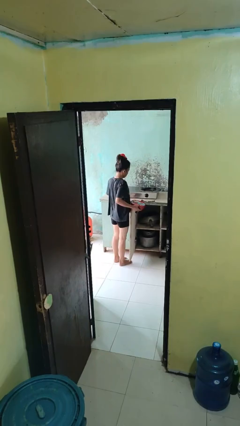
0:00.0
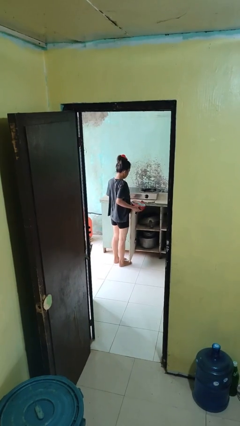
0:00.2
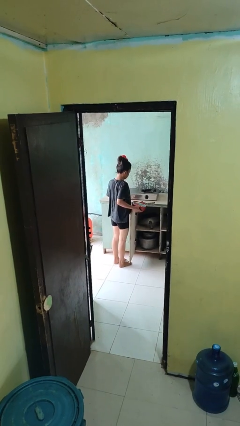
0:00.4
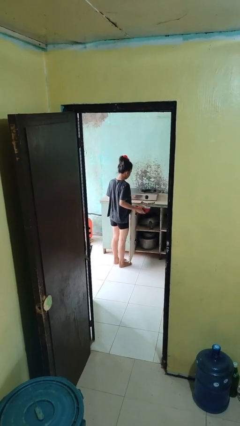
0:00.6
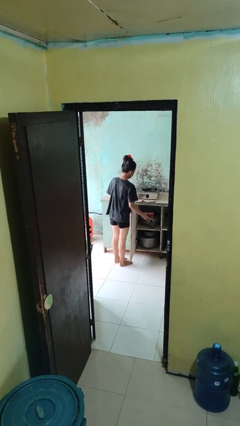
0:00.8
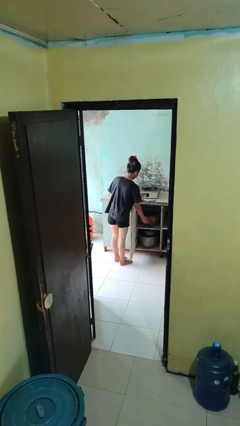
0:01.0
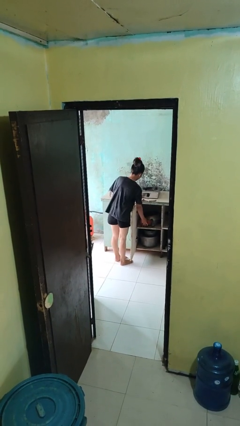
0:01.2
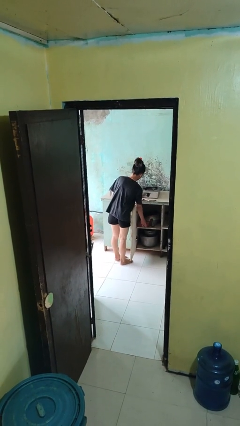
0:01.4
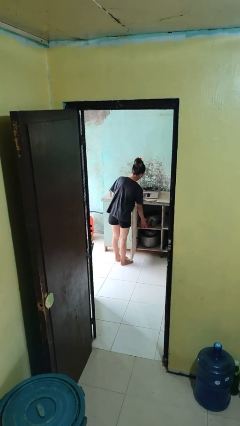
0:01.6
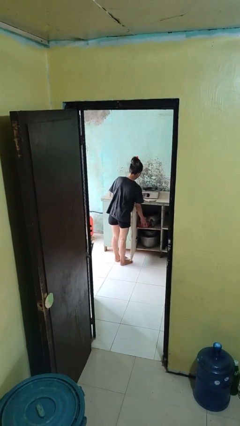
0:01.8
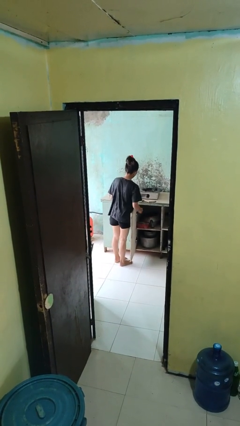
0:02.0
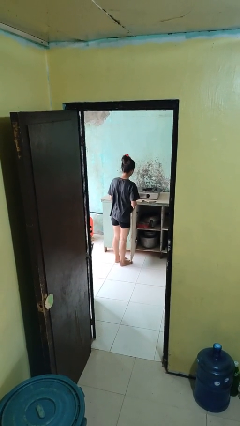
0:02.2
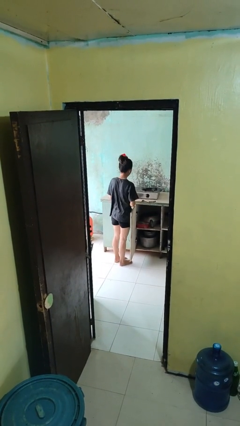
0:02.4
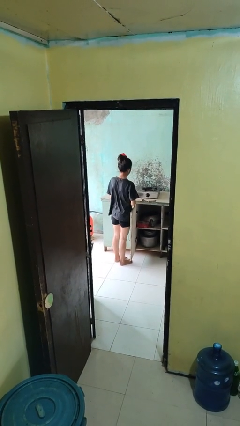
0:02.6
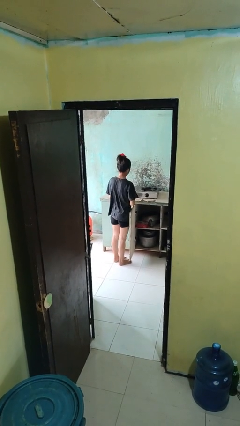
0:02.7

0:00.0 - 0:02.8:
person puts object in cabinet

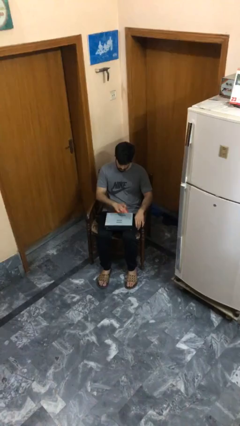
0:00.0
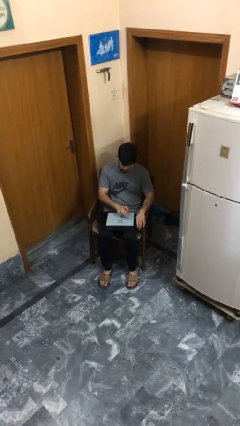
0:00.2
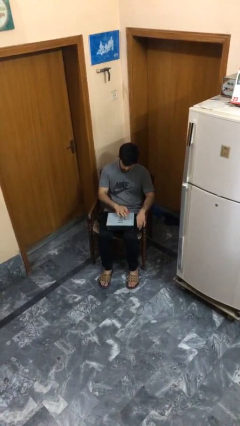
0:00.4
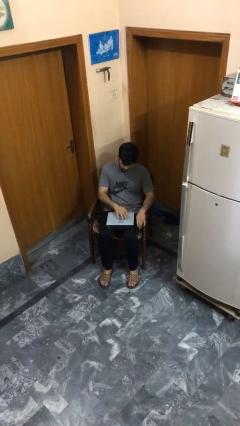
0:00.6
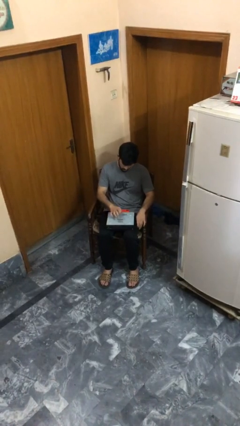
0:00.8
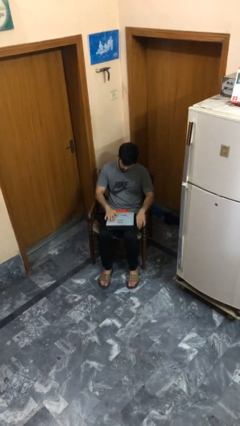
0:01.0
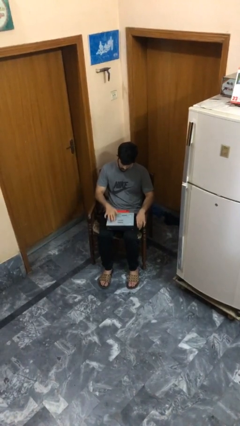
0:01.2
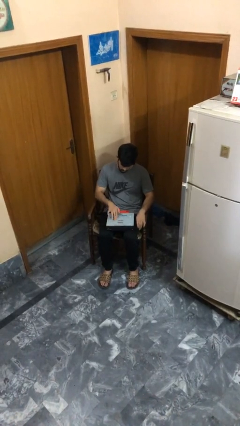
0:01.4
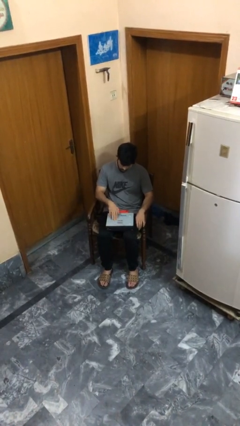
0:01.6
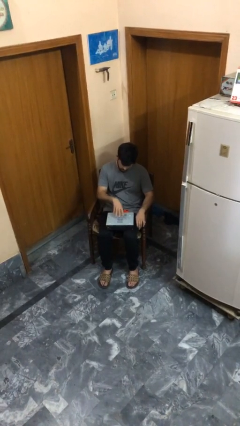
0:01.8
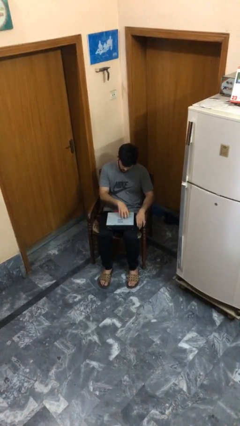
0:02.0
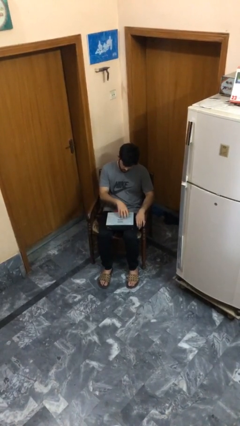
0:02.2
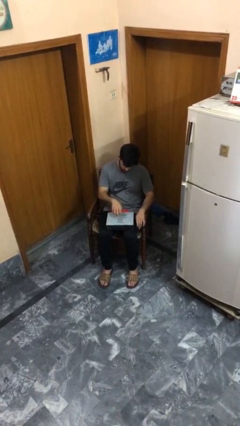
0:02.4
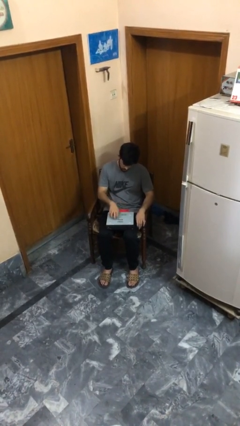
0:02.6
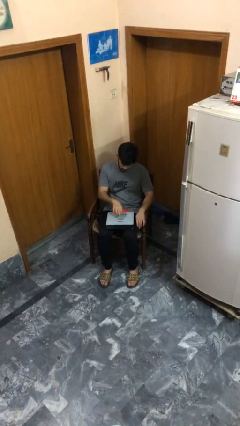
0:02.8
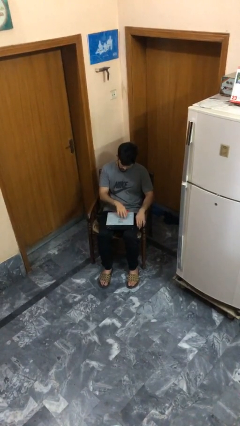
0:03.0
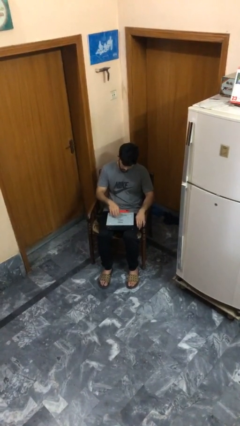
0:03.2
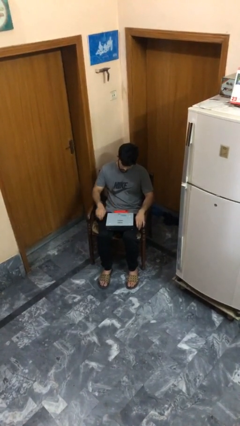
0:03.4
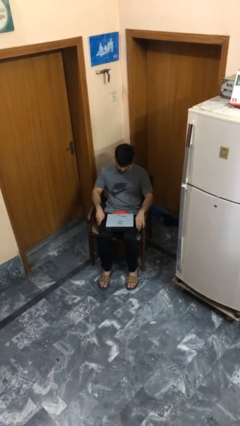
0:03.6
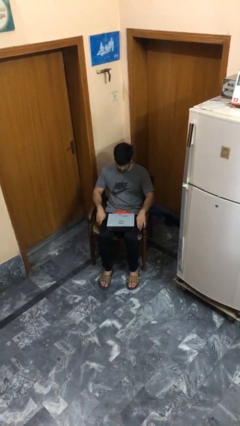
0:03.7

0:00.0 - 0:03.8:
person taps object with finger

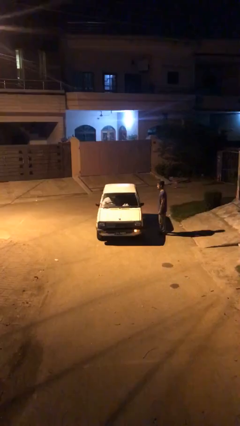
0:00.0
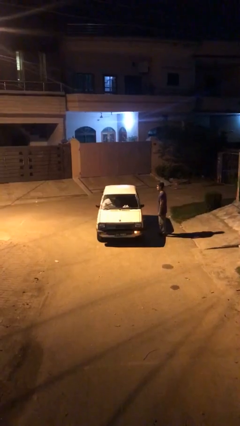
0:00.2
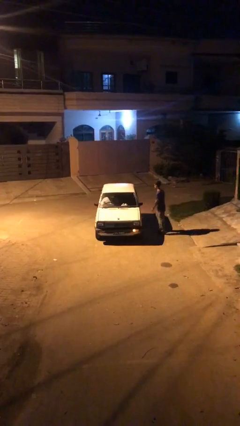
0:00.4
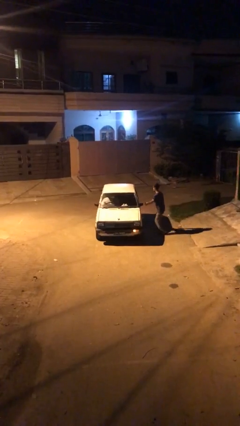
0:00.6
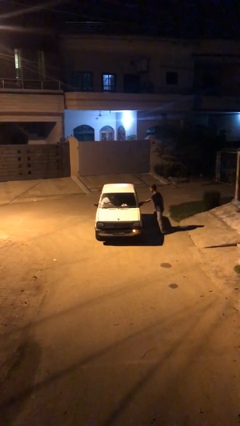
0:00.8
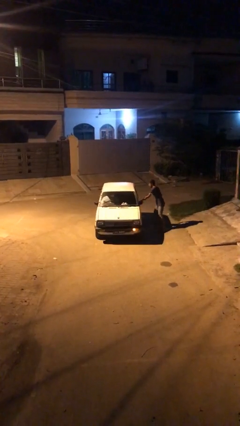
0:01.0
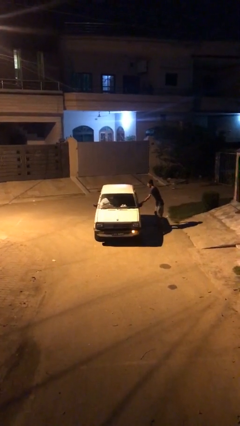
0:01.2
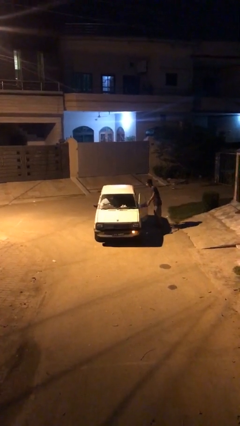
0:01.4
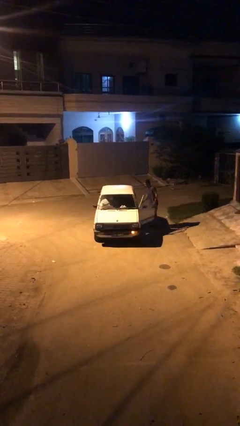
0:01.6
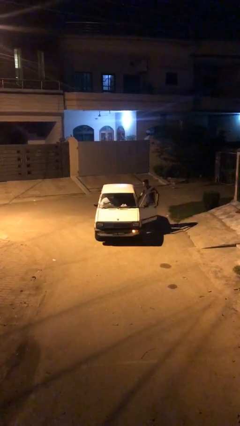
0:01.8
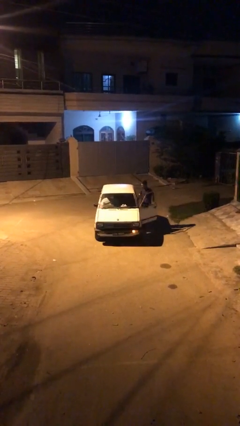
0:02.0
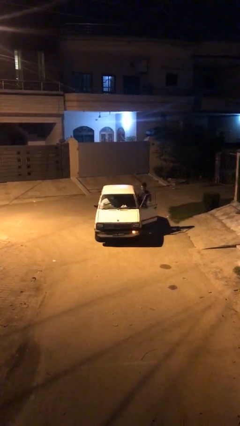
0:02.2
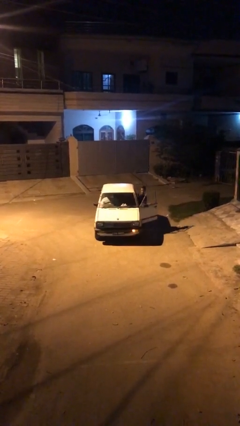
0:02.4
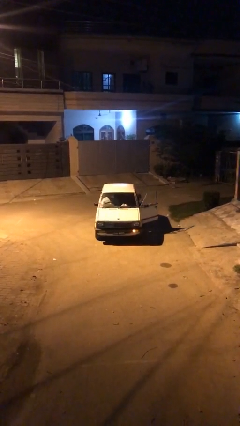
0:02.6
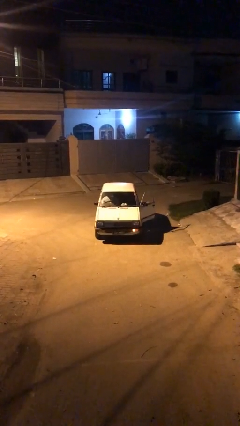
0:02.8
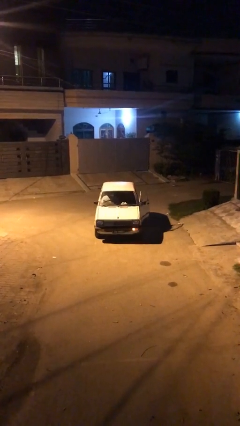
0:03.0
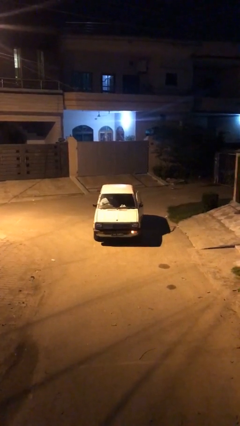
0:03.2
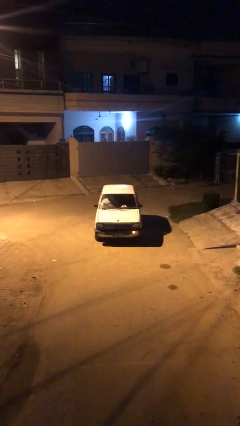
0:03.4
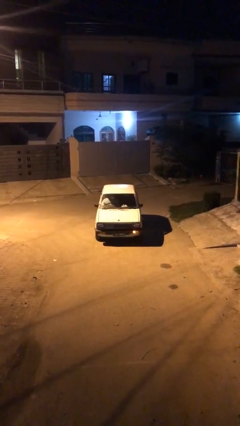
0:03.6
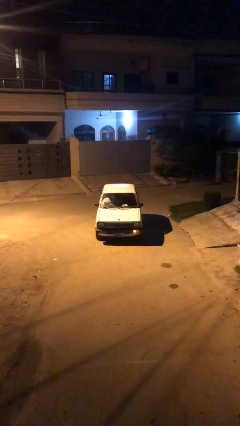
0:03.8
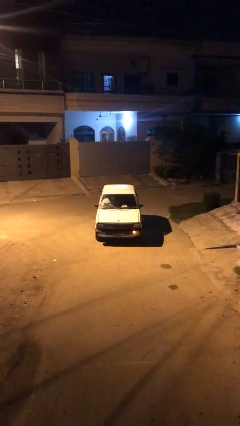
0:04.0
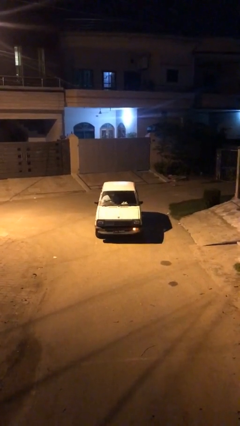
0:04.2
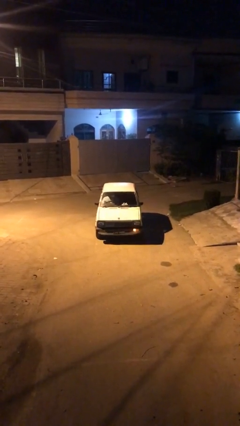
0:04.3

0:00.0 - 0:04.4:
car picks up person

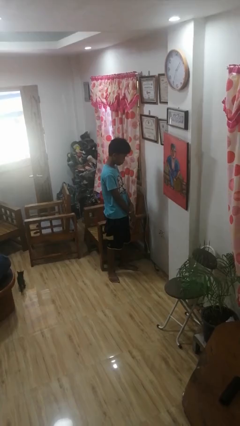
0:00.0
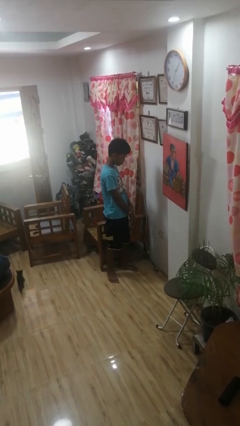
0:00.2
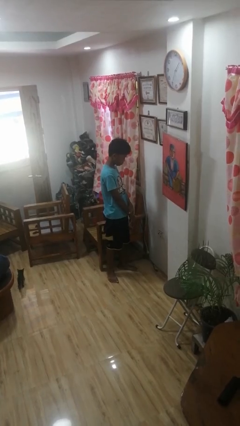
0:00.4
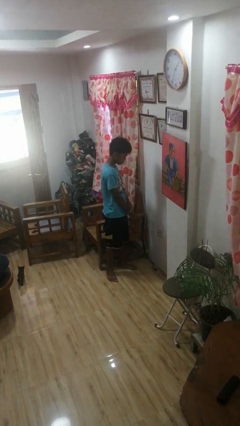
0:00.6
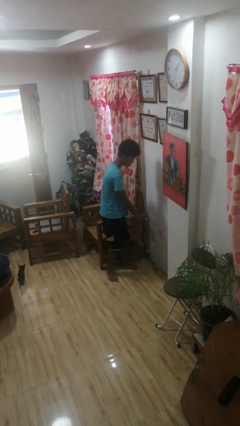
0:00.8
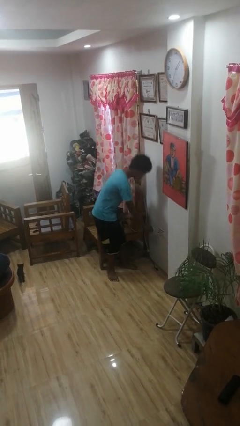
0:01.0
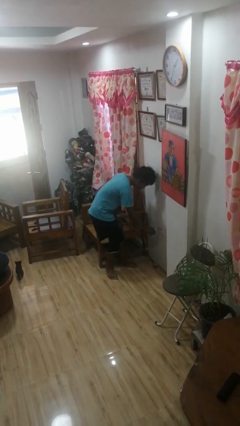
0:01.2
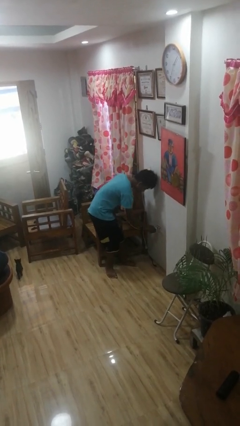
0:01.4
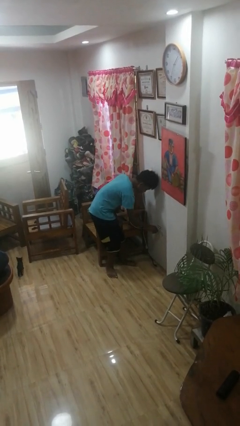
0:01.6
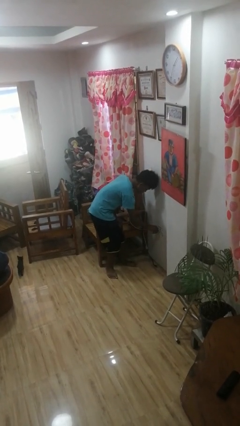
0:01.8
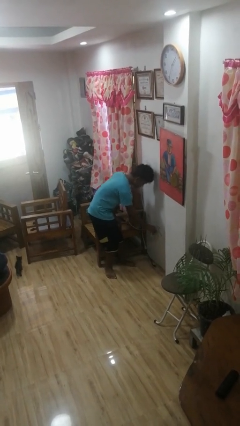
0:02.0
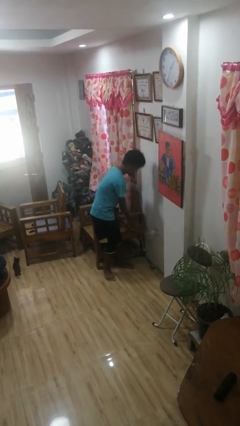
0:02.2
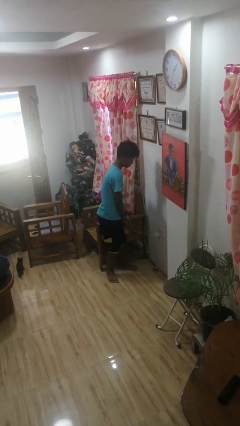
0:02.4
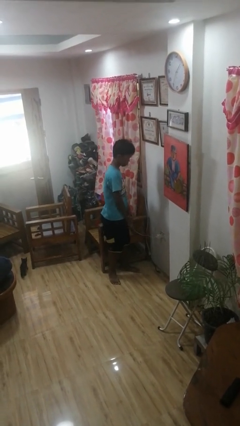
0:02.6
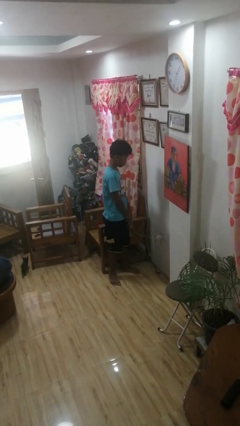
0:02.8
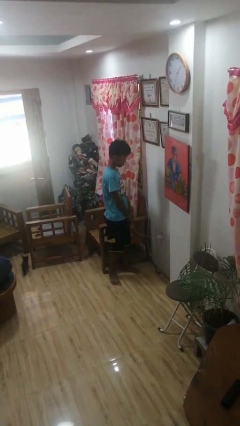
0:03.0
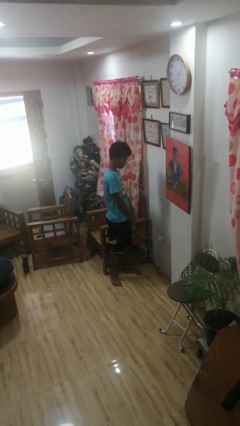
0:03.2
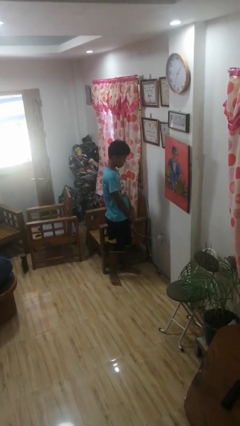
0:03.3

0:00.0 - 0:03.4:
person plugs into electrical socket

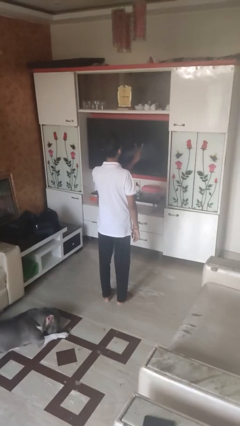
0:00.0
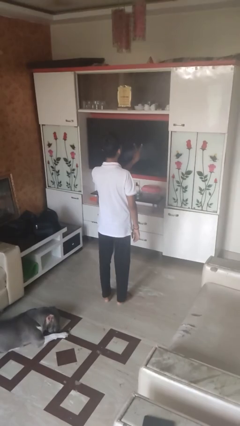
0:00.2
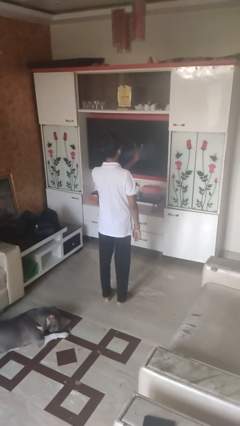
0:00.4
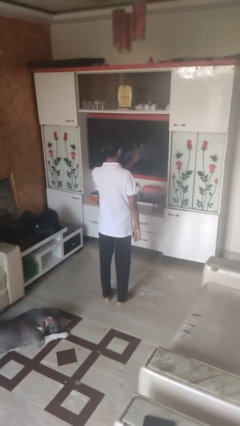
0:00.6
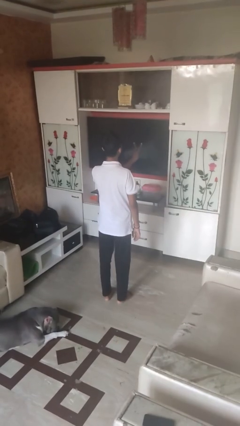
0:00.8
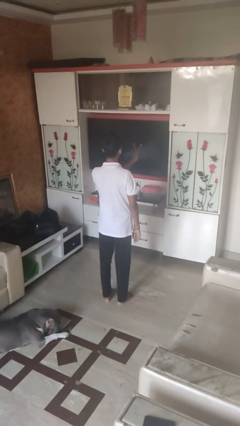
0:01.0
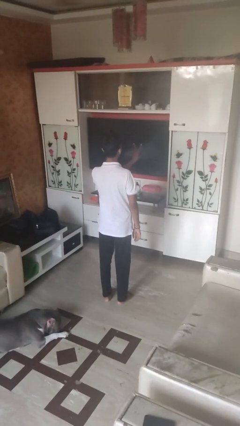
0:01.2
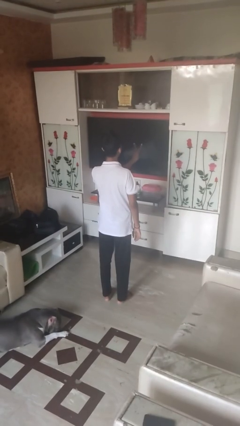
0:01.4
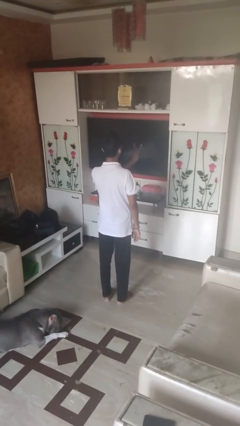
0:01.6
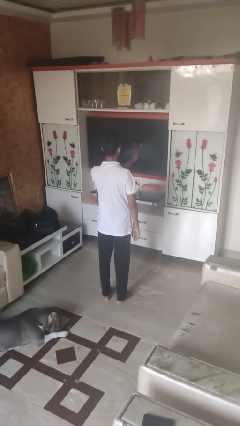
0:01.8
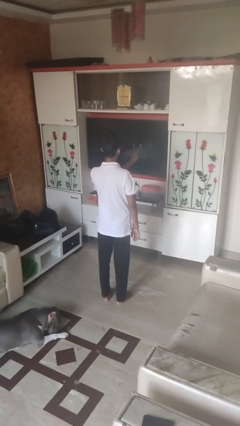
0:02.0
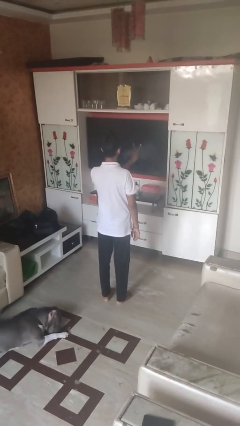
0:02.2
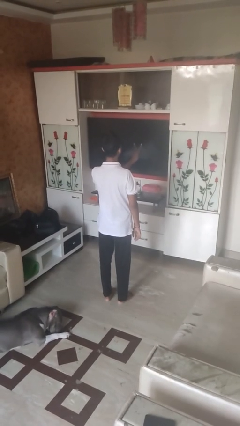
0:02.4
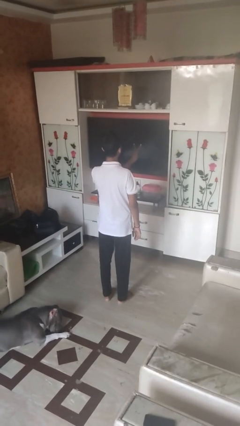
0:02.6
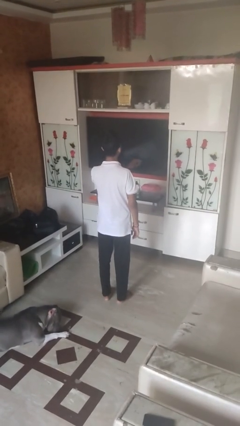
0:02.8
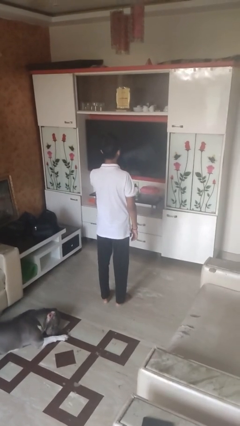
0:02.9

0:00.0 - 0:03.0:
person gestures peace

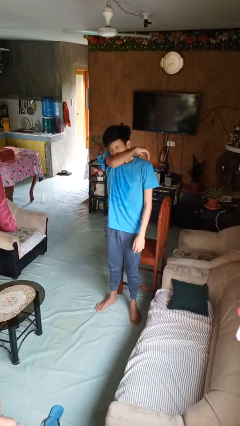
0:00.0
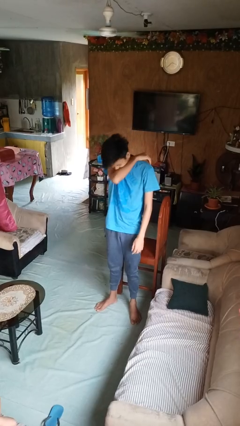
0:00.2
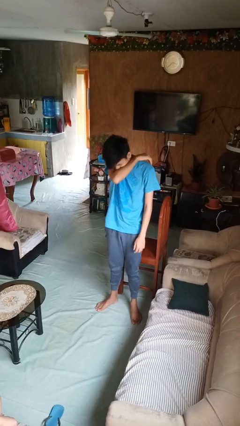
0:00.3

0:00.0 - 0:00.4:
person sneezes into arm
